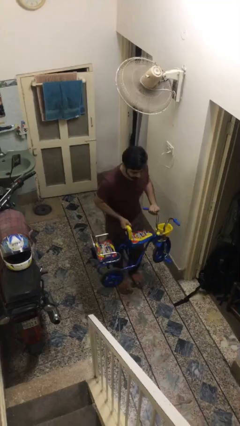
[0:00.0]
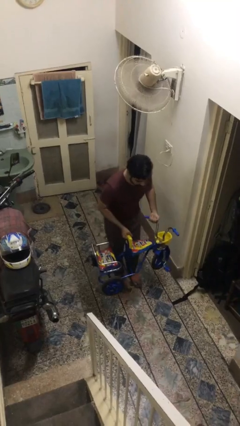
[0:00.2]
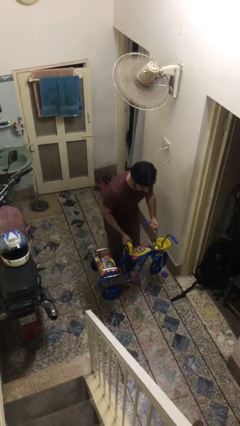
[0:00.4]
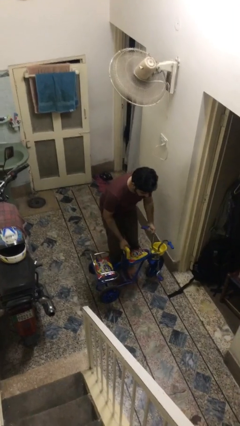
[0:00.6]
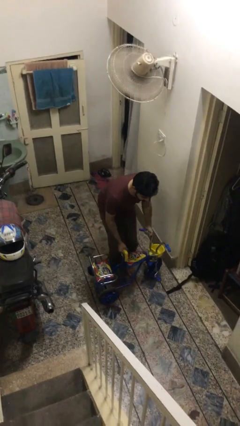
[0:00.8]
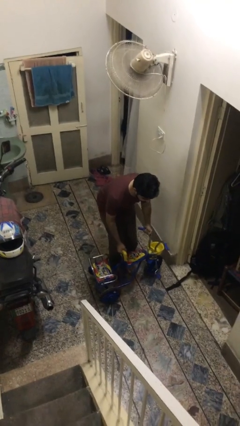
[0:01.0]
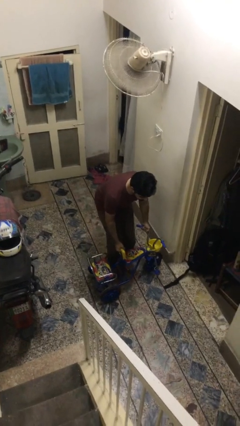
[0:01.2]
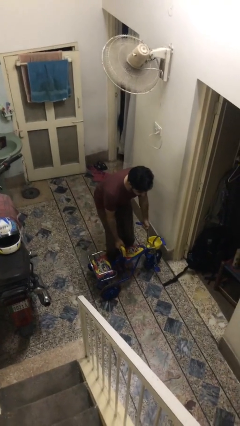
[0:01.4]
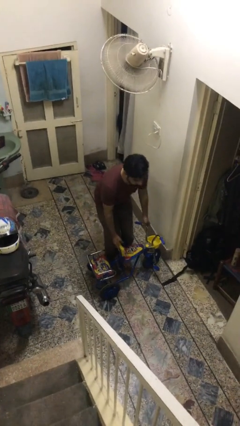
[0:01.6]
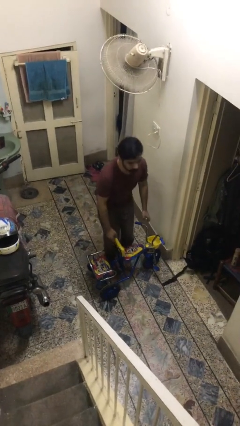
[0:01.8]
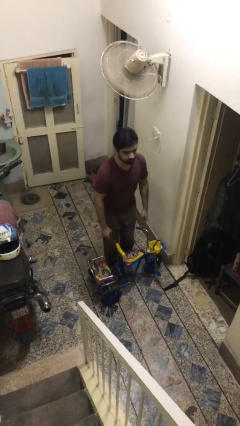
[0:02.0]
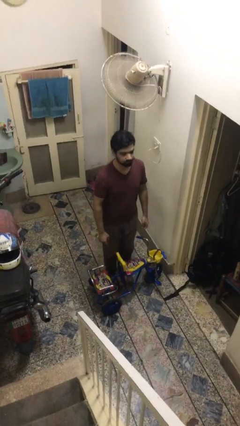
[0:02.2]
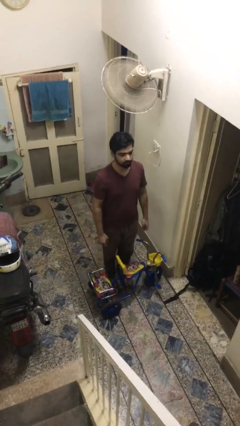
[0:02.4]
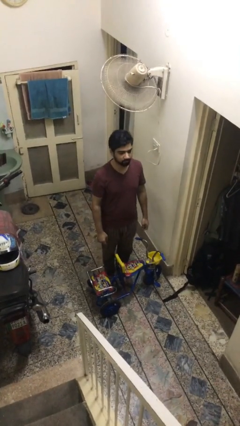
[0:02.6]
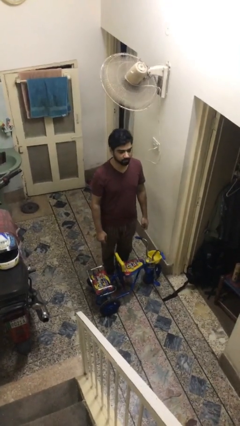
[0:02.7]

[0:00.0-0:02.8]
person puts down object on floor

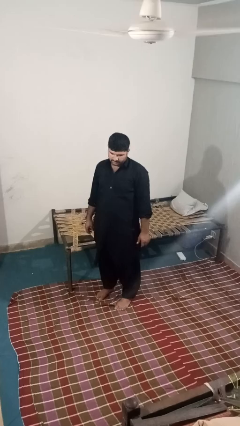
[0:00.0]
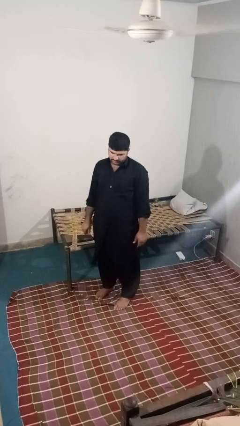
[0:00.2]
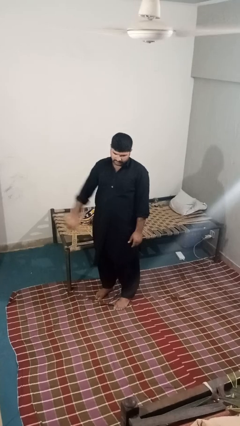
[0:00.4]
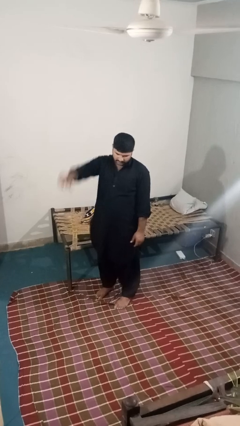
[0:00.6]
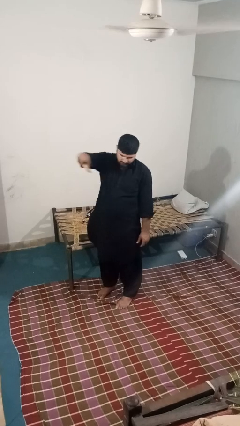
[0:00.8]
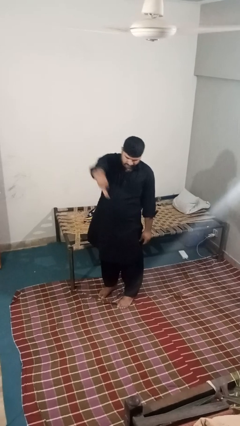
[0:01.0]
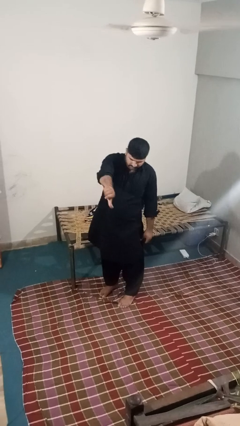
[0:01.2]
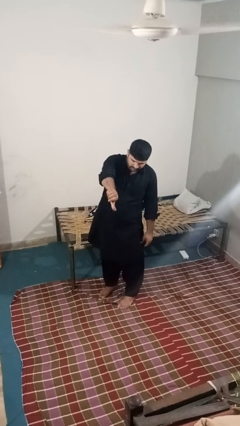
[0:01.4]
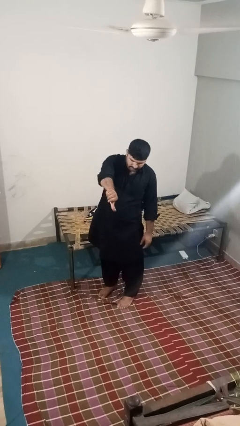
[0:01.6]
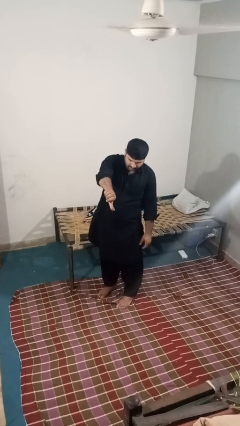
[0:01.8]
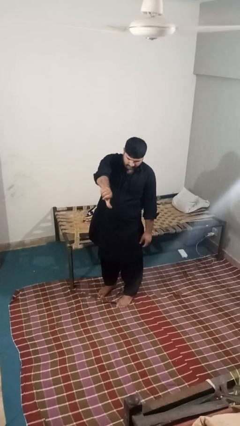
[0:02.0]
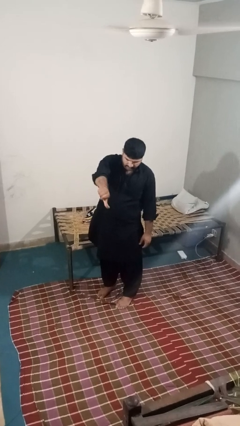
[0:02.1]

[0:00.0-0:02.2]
person gestures thumbs down

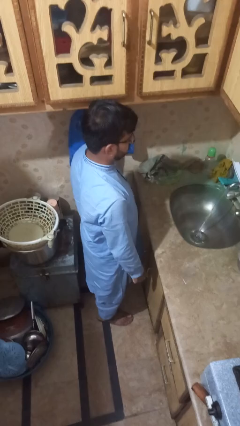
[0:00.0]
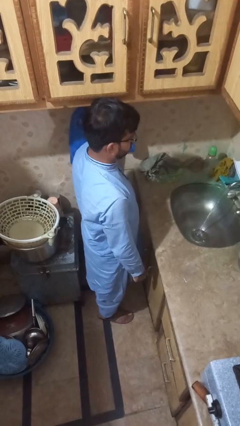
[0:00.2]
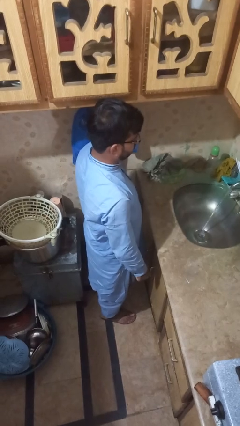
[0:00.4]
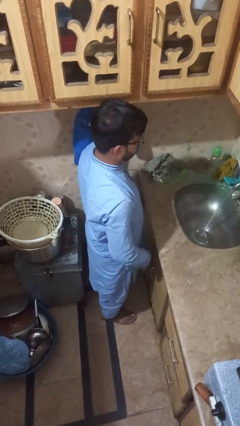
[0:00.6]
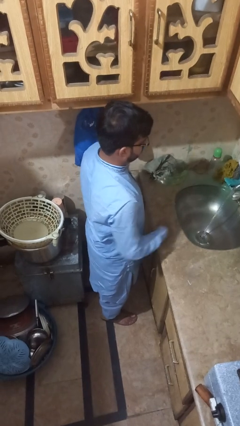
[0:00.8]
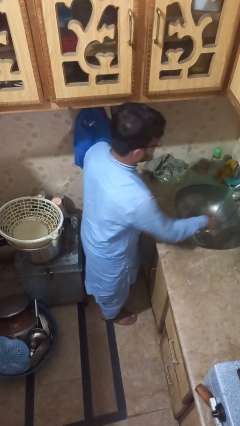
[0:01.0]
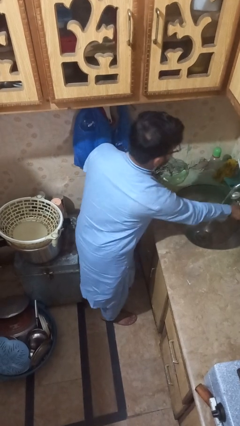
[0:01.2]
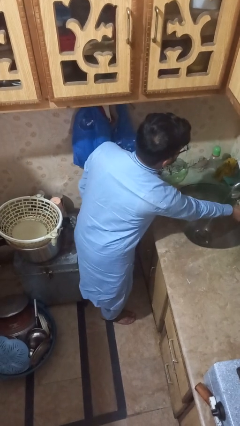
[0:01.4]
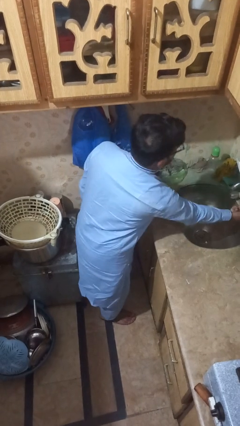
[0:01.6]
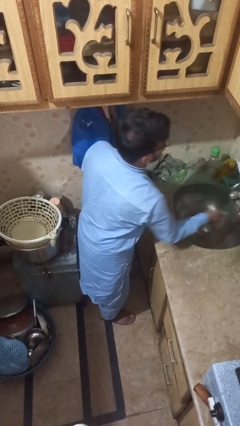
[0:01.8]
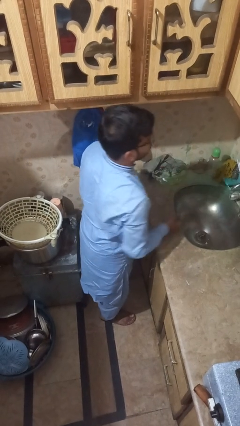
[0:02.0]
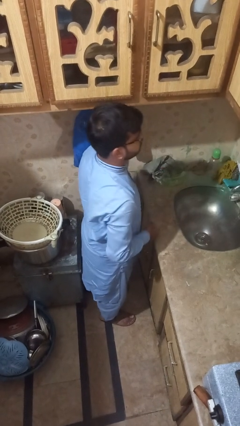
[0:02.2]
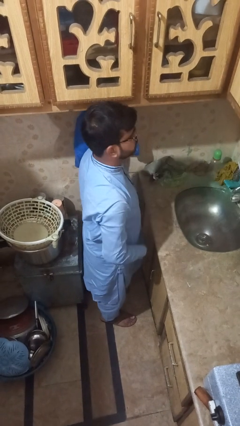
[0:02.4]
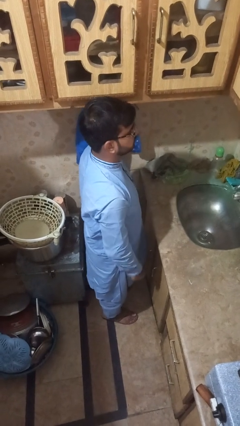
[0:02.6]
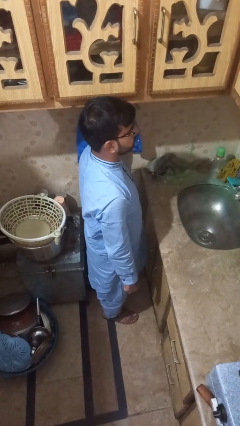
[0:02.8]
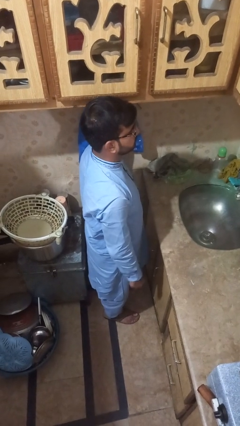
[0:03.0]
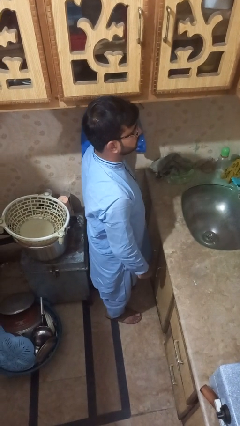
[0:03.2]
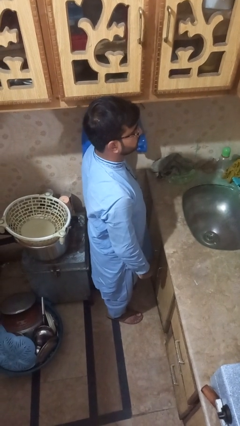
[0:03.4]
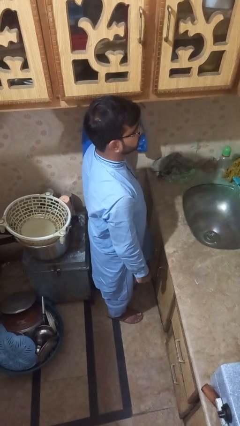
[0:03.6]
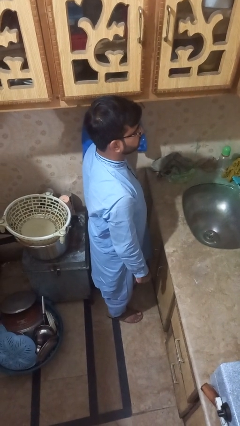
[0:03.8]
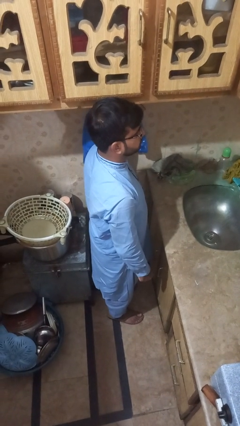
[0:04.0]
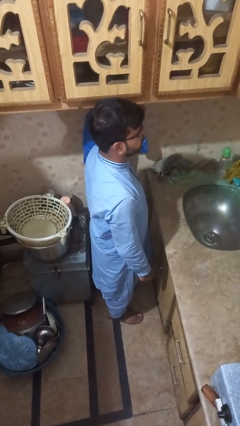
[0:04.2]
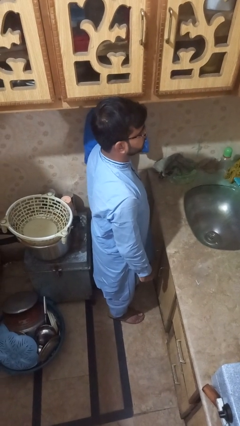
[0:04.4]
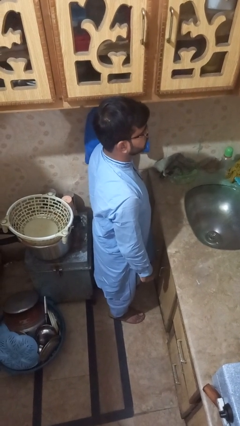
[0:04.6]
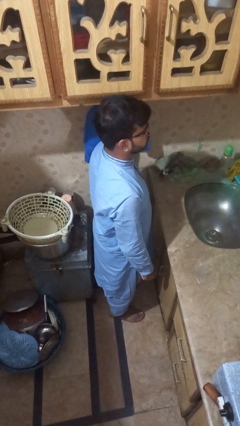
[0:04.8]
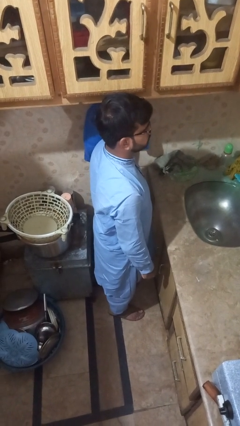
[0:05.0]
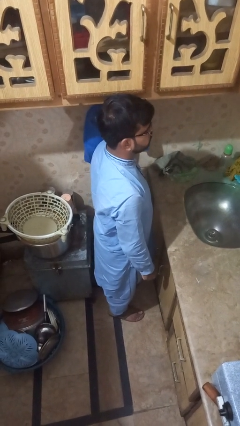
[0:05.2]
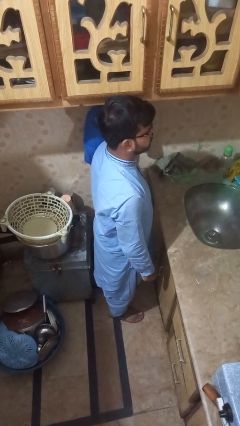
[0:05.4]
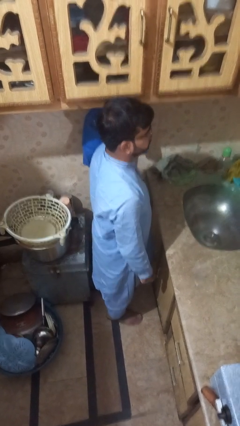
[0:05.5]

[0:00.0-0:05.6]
person turns off faucet

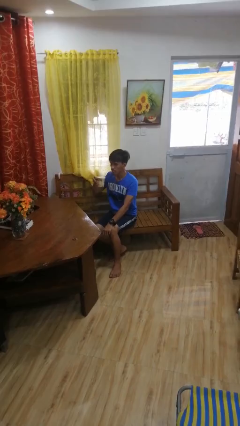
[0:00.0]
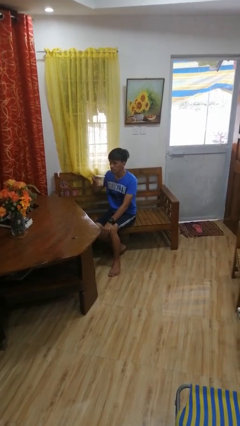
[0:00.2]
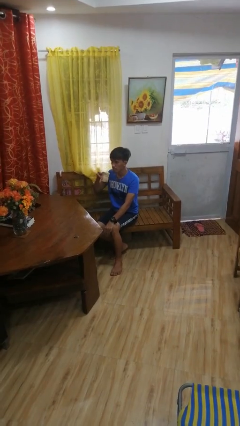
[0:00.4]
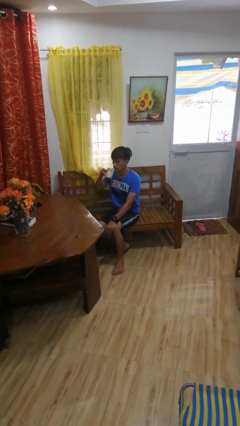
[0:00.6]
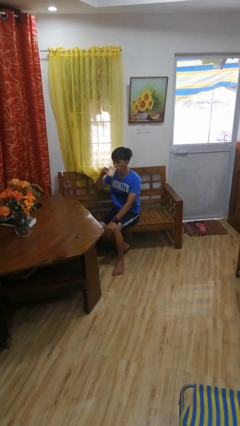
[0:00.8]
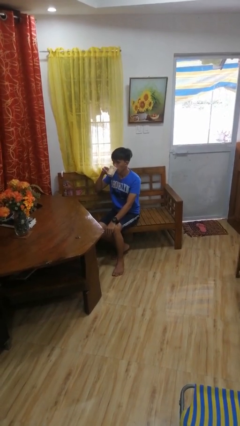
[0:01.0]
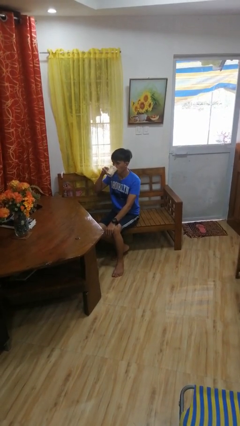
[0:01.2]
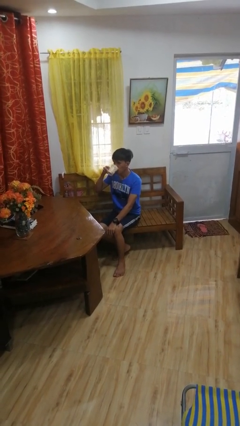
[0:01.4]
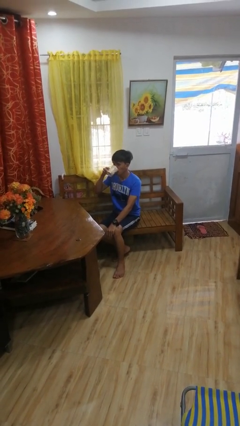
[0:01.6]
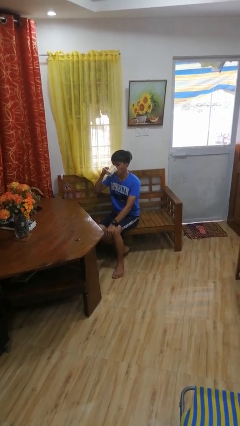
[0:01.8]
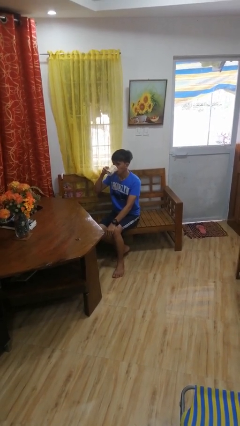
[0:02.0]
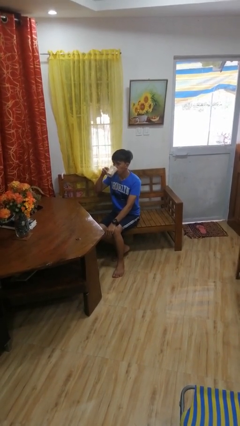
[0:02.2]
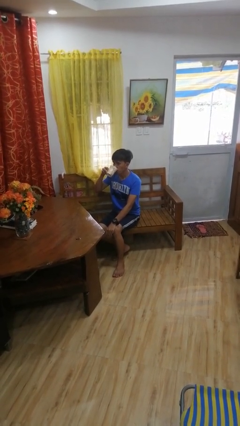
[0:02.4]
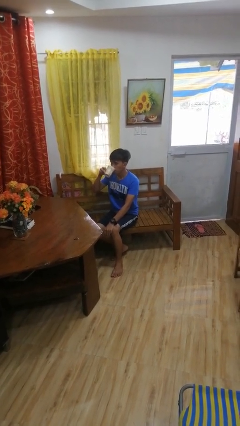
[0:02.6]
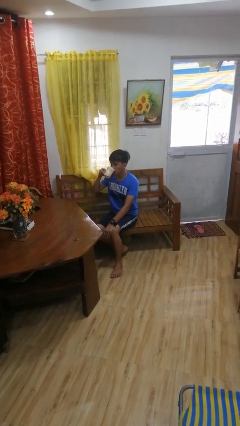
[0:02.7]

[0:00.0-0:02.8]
person drinks from mug

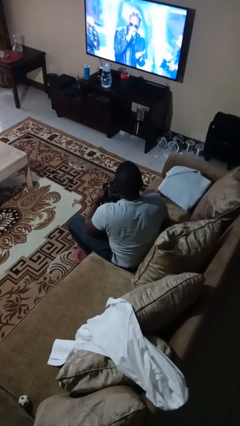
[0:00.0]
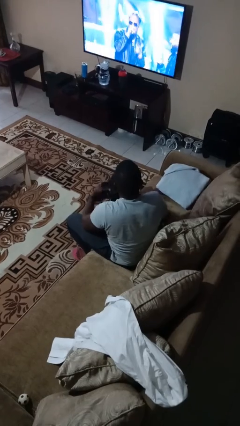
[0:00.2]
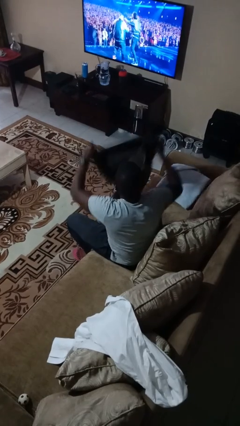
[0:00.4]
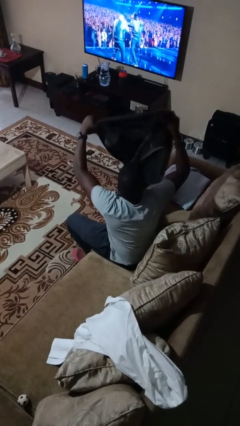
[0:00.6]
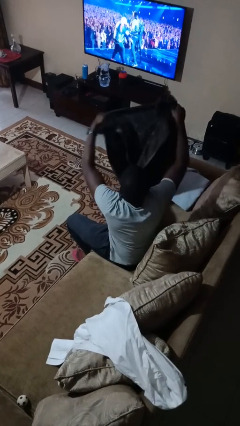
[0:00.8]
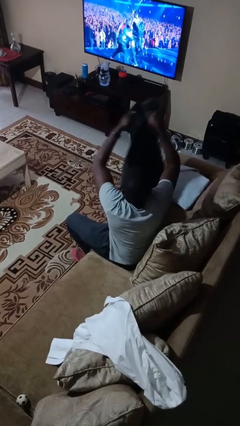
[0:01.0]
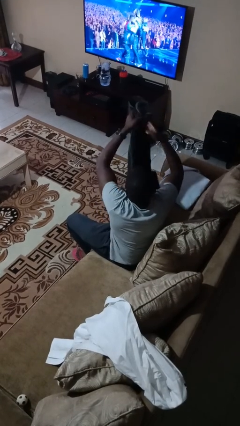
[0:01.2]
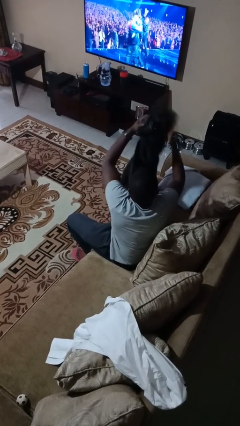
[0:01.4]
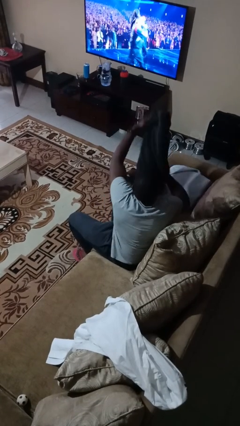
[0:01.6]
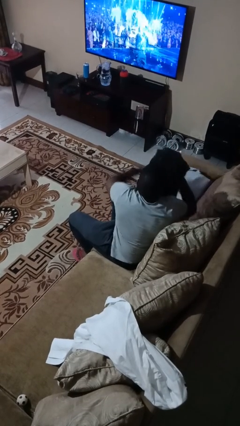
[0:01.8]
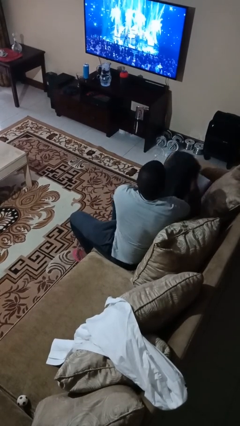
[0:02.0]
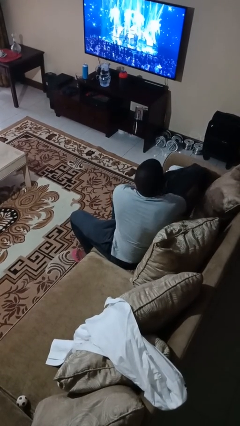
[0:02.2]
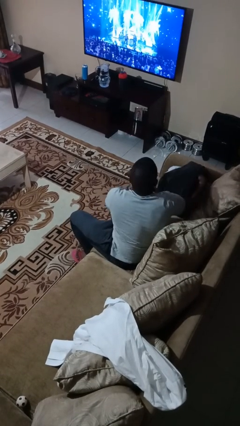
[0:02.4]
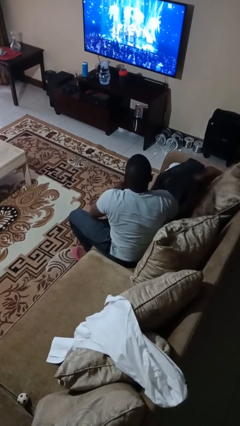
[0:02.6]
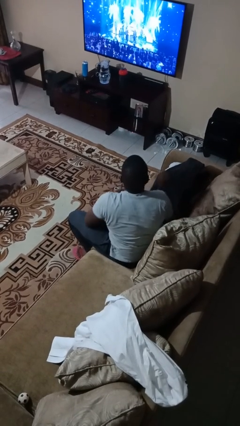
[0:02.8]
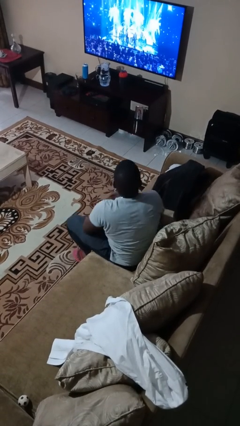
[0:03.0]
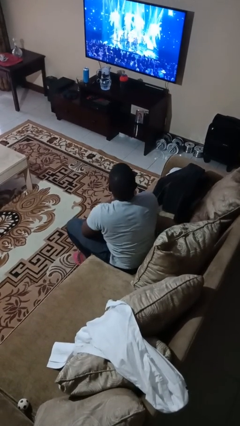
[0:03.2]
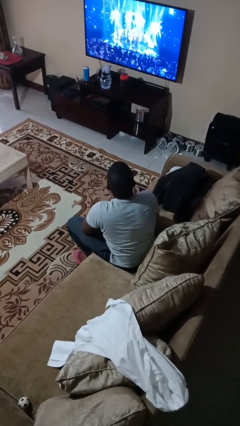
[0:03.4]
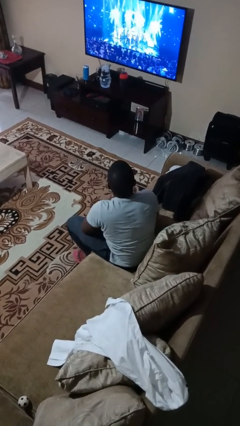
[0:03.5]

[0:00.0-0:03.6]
person folds towel

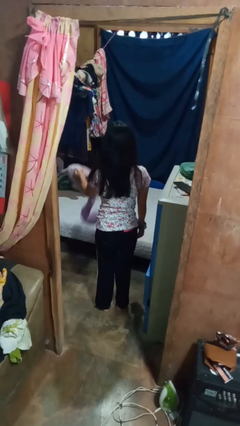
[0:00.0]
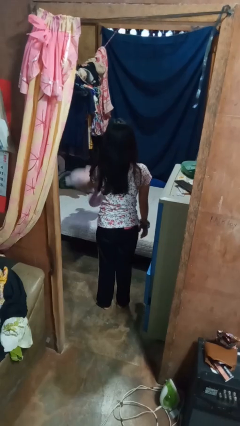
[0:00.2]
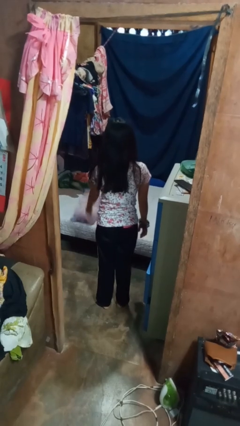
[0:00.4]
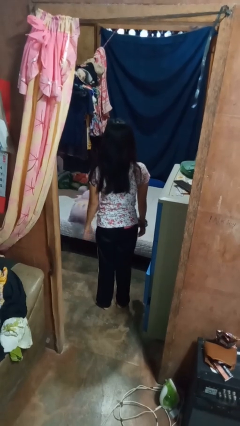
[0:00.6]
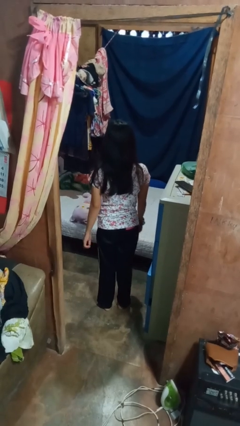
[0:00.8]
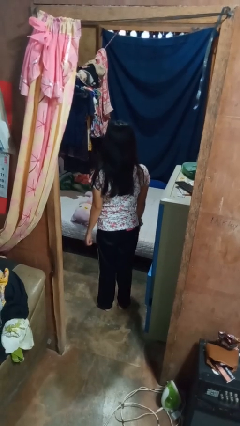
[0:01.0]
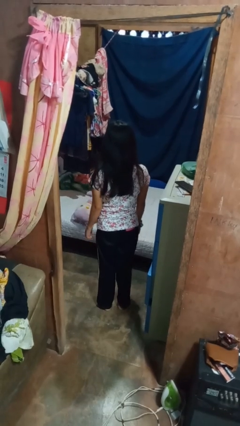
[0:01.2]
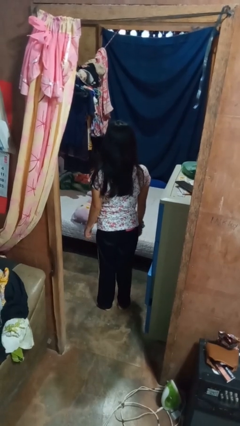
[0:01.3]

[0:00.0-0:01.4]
person throws object on bed
